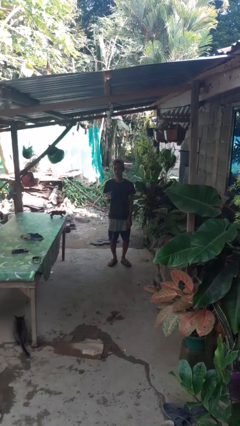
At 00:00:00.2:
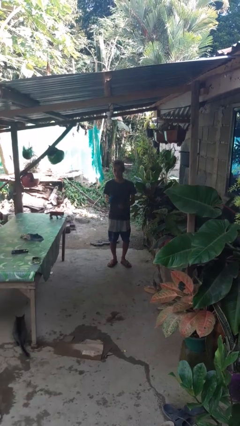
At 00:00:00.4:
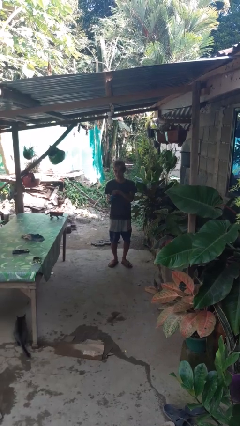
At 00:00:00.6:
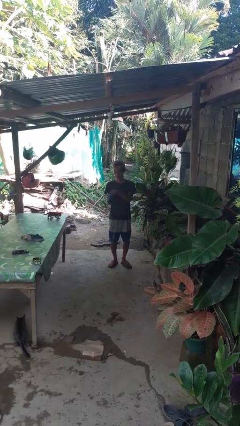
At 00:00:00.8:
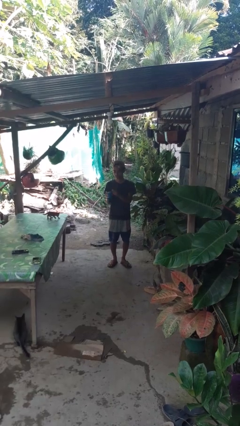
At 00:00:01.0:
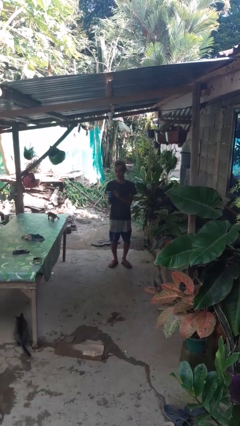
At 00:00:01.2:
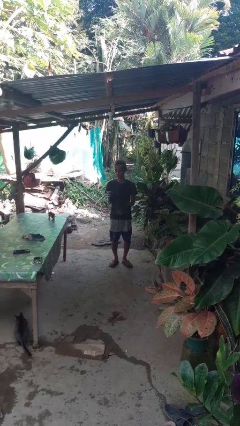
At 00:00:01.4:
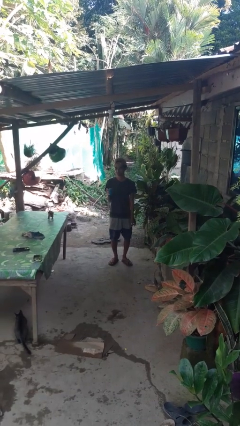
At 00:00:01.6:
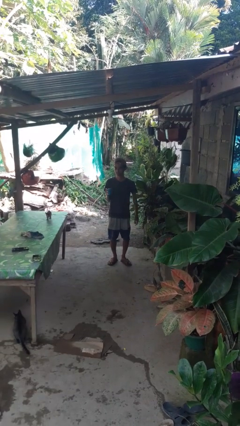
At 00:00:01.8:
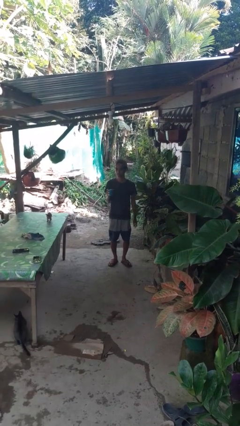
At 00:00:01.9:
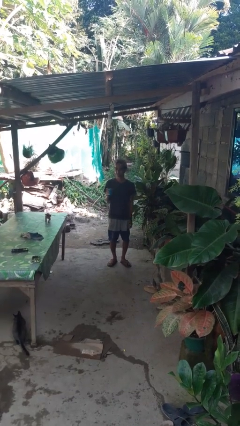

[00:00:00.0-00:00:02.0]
person opens beverage can

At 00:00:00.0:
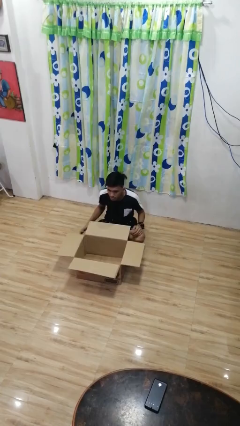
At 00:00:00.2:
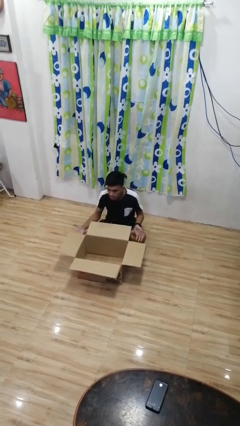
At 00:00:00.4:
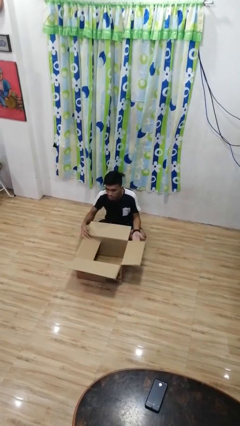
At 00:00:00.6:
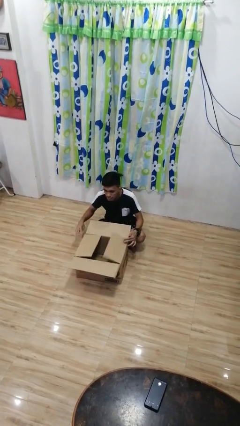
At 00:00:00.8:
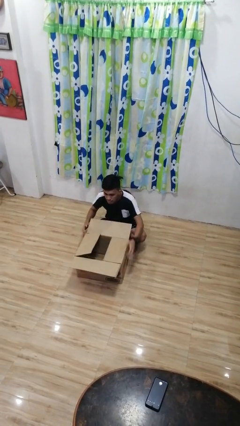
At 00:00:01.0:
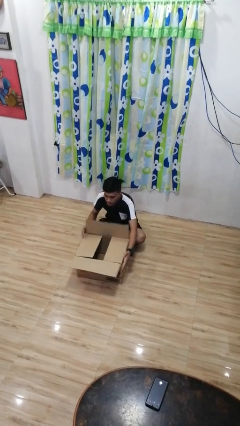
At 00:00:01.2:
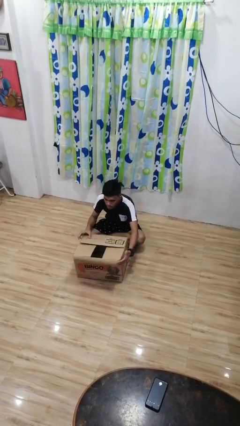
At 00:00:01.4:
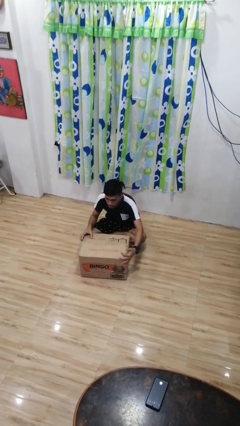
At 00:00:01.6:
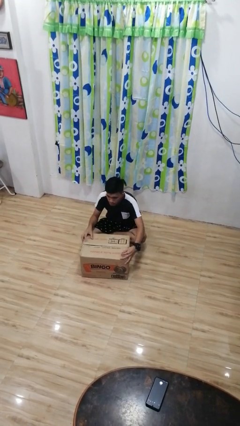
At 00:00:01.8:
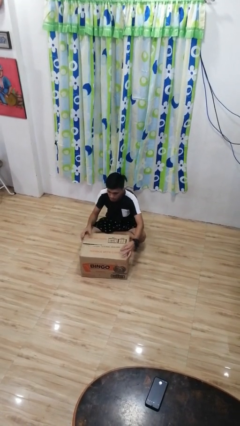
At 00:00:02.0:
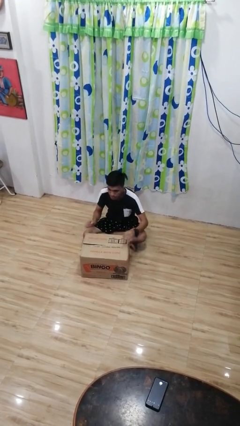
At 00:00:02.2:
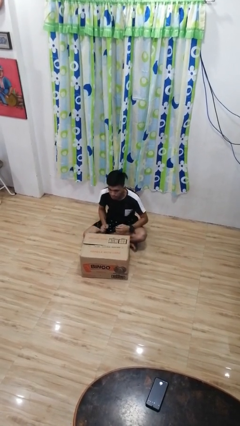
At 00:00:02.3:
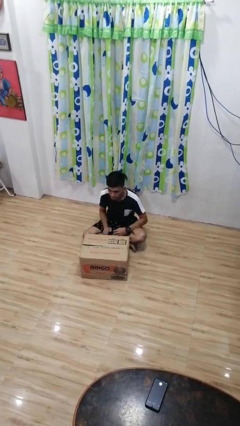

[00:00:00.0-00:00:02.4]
person closes box

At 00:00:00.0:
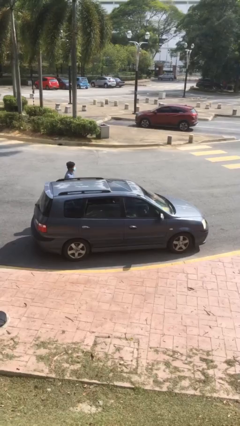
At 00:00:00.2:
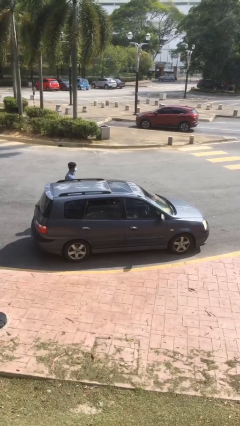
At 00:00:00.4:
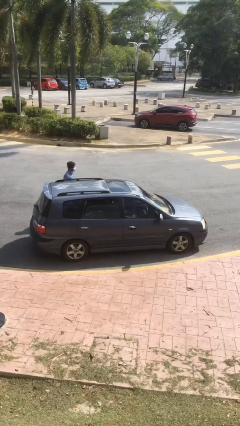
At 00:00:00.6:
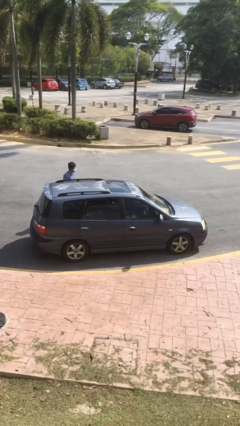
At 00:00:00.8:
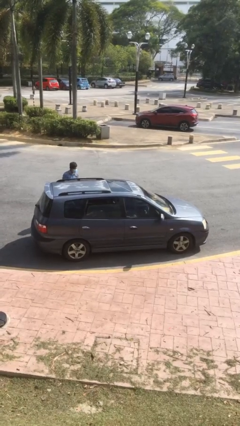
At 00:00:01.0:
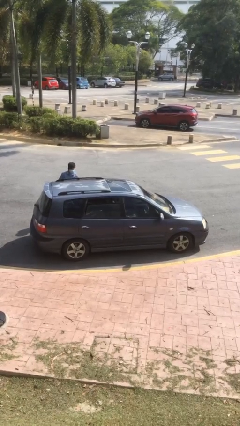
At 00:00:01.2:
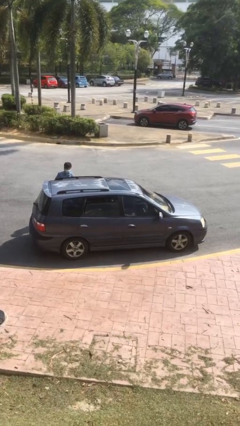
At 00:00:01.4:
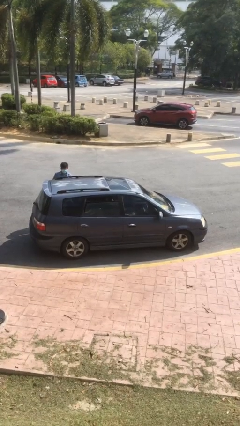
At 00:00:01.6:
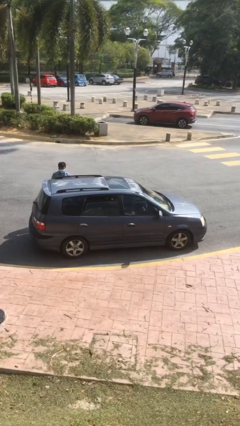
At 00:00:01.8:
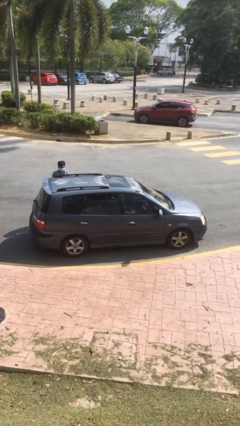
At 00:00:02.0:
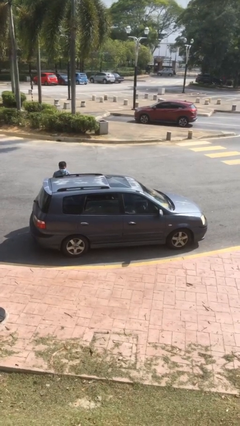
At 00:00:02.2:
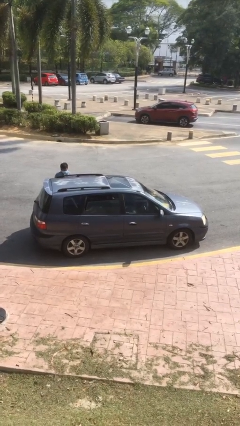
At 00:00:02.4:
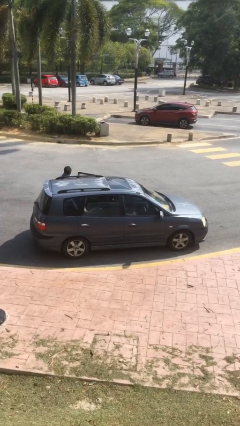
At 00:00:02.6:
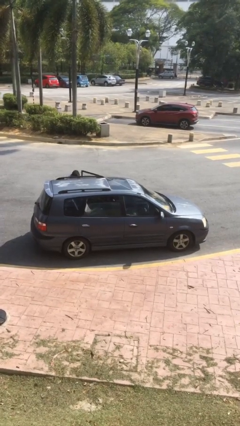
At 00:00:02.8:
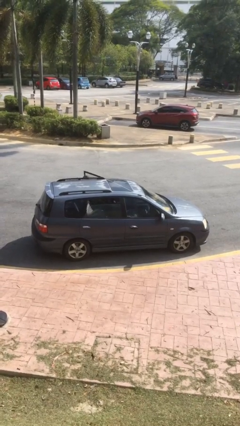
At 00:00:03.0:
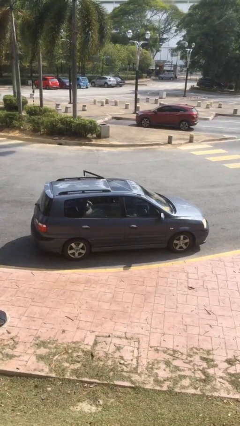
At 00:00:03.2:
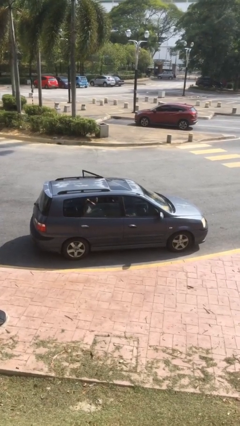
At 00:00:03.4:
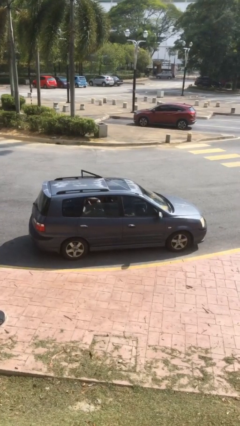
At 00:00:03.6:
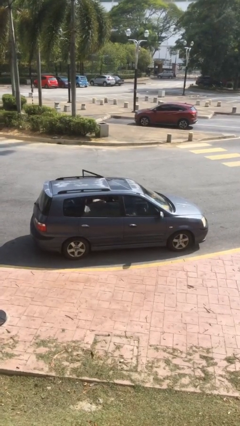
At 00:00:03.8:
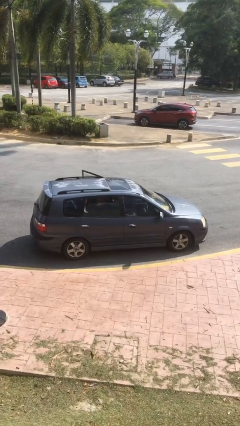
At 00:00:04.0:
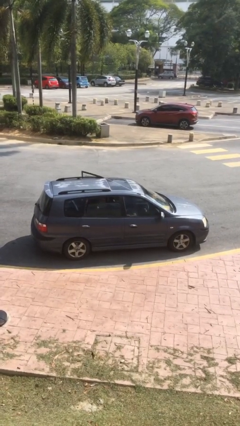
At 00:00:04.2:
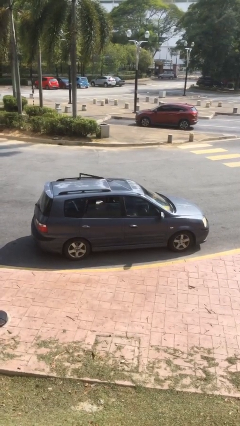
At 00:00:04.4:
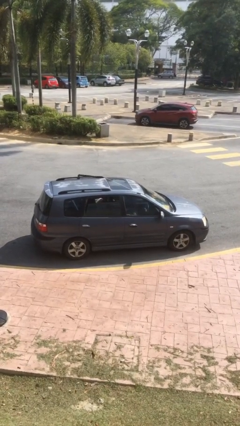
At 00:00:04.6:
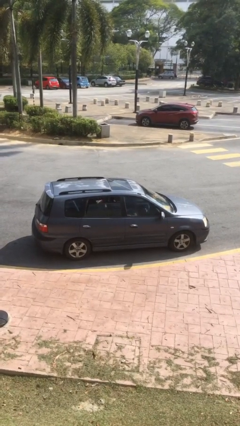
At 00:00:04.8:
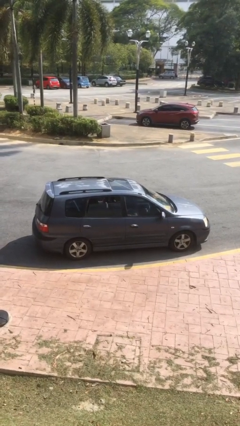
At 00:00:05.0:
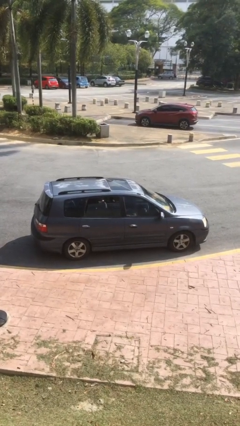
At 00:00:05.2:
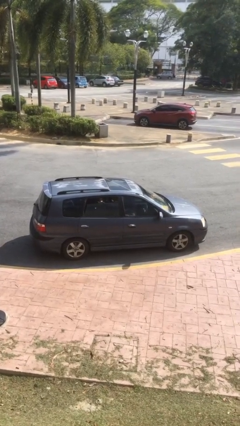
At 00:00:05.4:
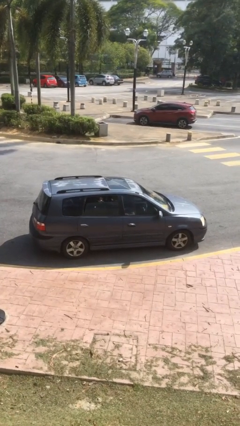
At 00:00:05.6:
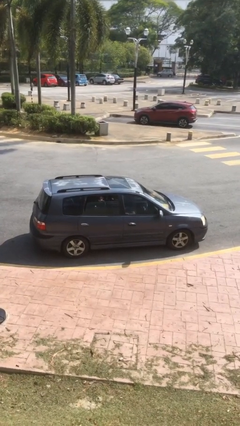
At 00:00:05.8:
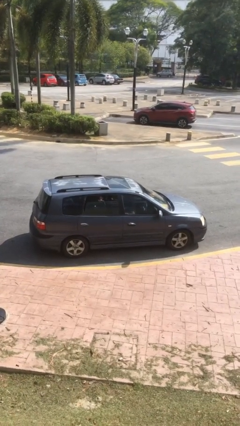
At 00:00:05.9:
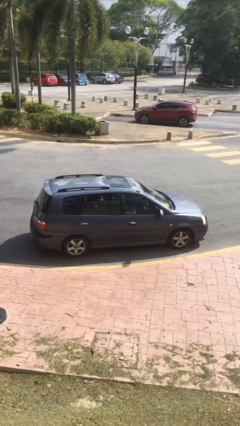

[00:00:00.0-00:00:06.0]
car picks up person

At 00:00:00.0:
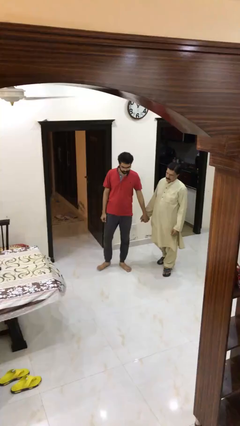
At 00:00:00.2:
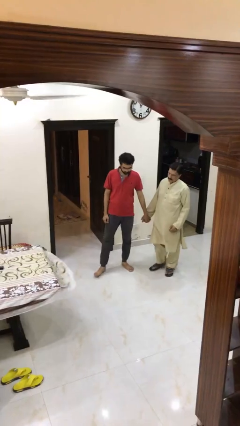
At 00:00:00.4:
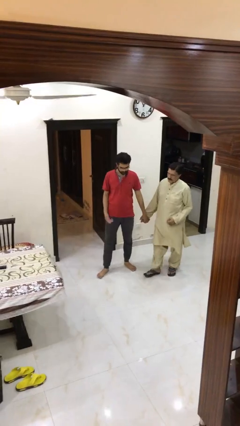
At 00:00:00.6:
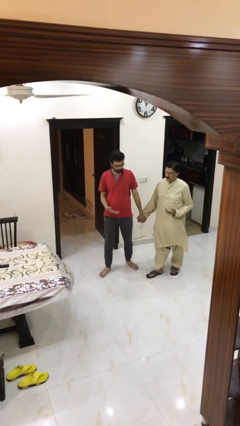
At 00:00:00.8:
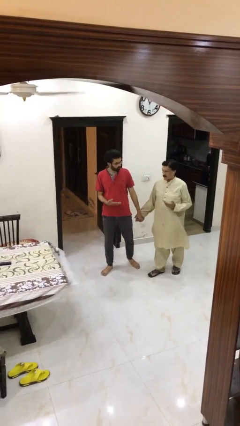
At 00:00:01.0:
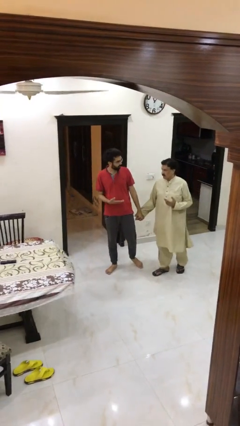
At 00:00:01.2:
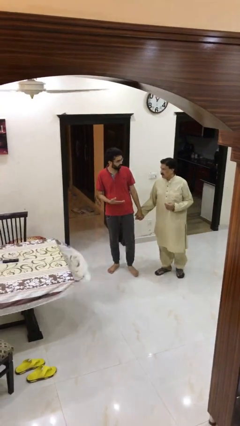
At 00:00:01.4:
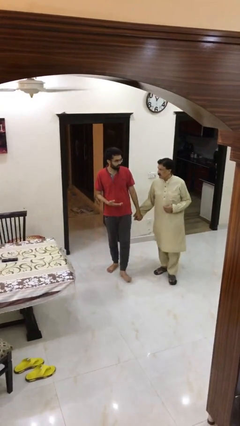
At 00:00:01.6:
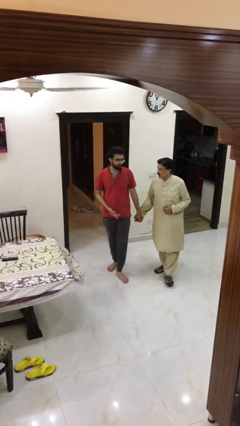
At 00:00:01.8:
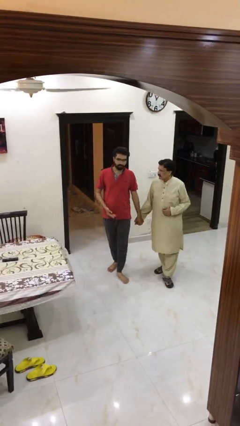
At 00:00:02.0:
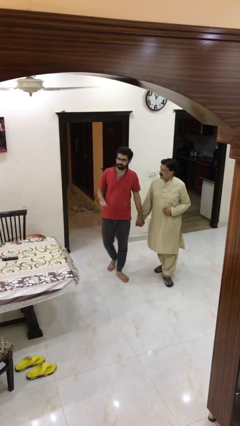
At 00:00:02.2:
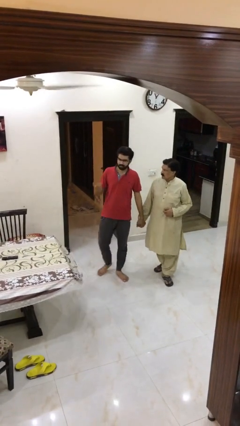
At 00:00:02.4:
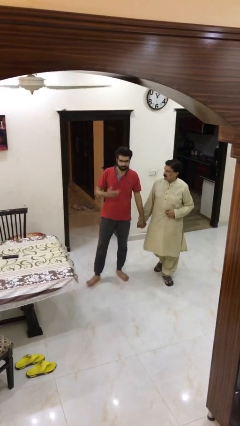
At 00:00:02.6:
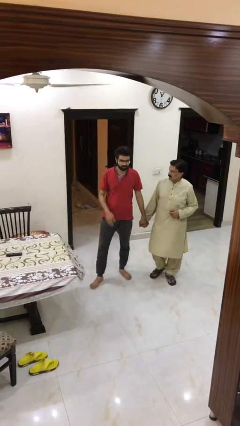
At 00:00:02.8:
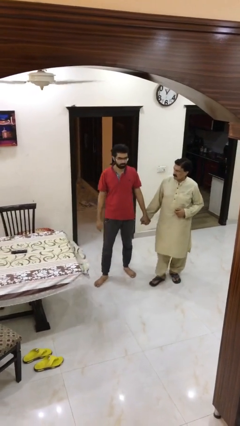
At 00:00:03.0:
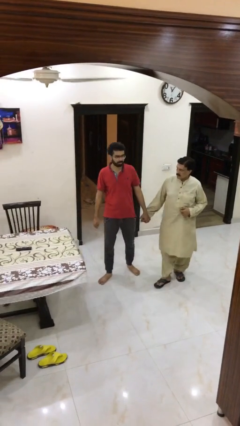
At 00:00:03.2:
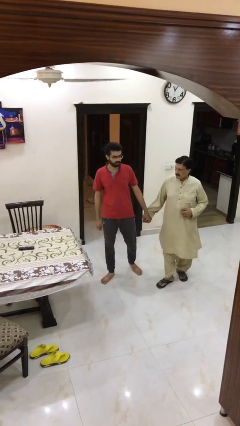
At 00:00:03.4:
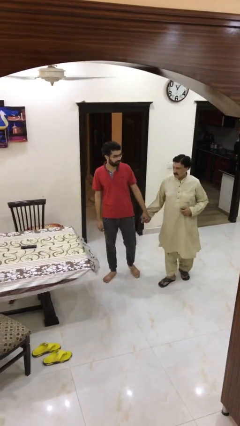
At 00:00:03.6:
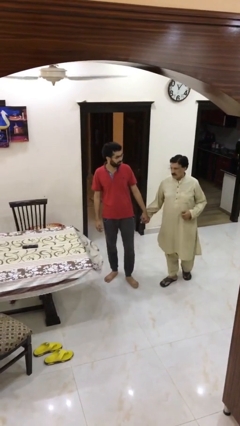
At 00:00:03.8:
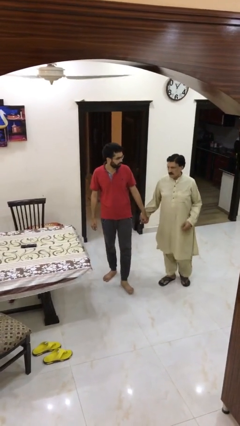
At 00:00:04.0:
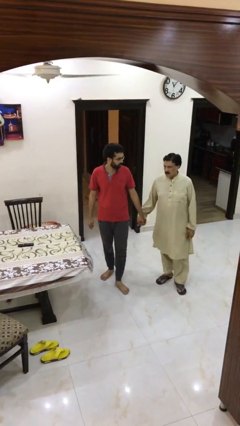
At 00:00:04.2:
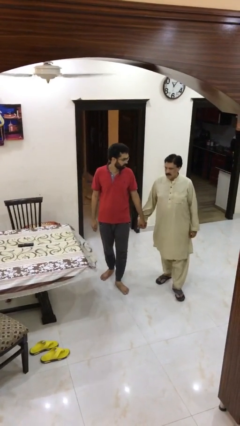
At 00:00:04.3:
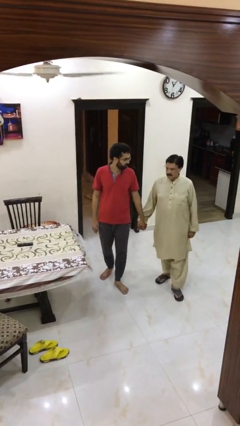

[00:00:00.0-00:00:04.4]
person holds hand

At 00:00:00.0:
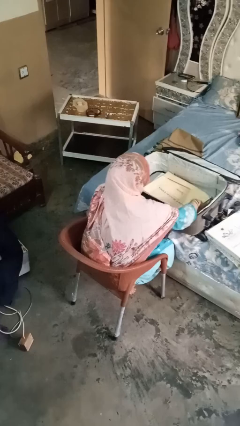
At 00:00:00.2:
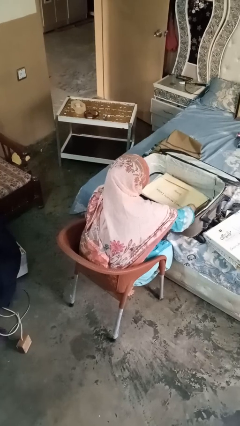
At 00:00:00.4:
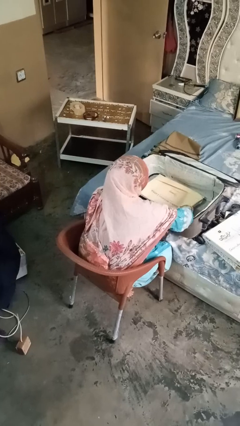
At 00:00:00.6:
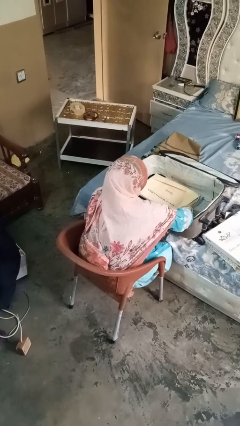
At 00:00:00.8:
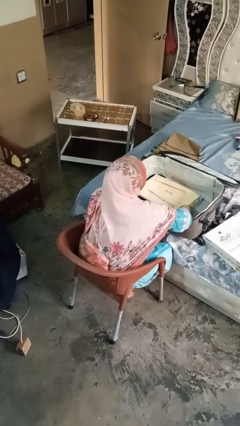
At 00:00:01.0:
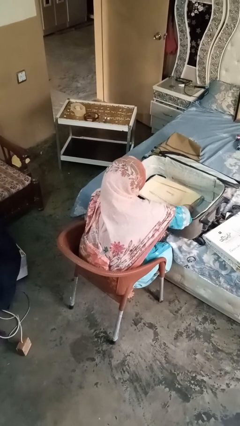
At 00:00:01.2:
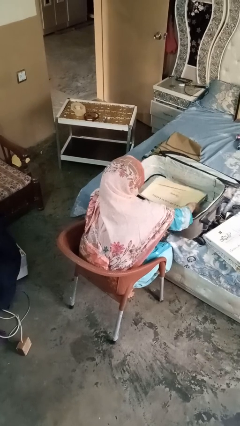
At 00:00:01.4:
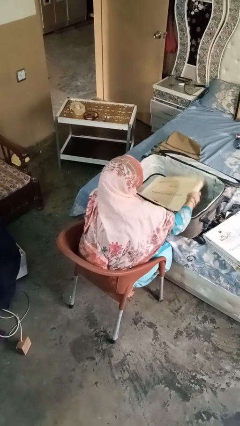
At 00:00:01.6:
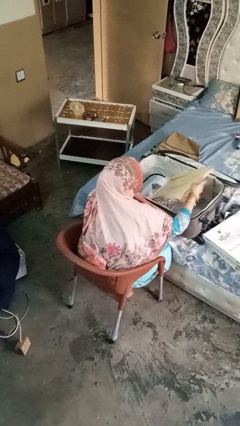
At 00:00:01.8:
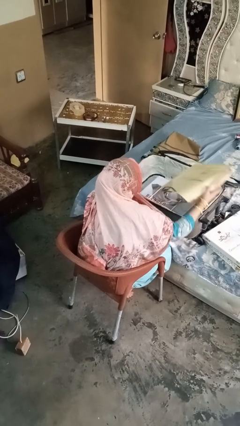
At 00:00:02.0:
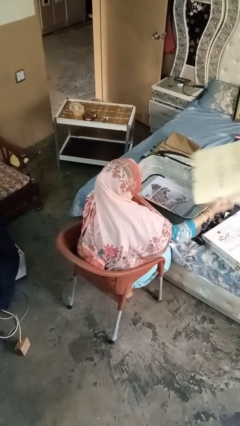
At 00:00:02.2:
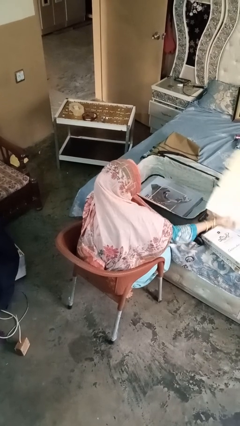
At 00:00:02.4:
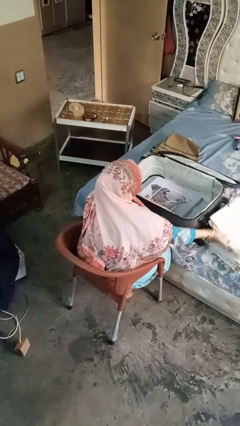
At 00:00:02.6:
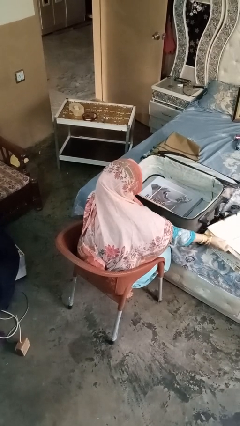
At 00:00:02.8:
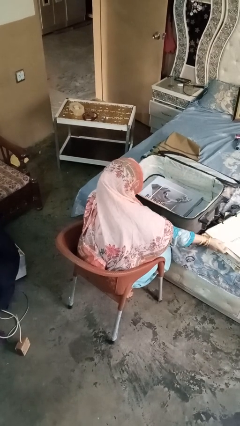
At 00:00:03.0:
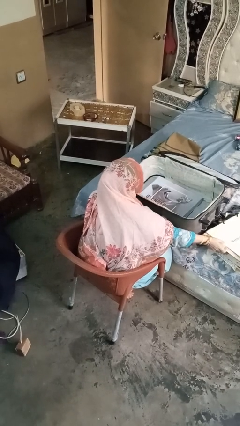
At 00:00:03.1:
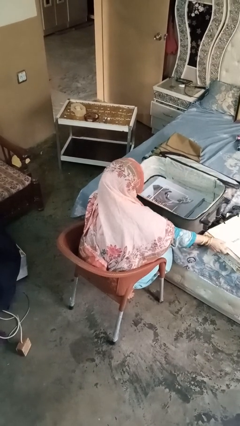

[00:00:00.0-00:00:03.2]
person unloads clothes from suitcase
